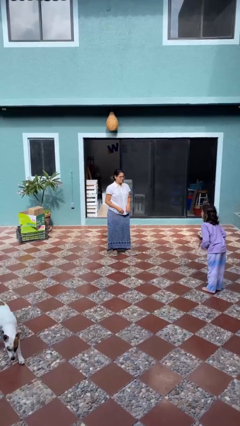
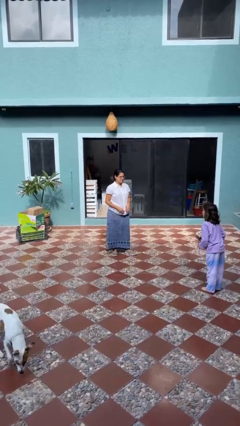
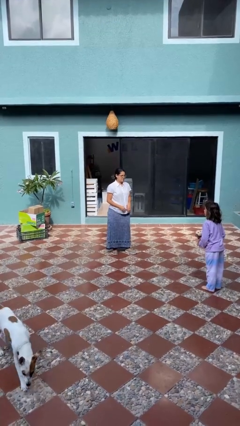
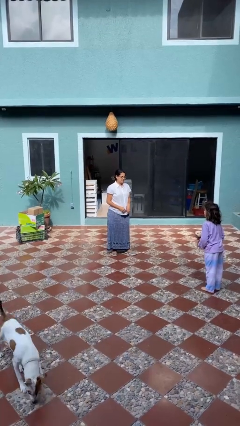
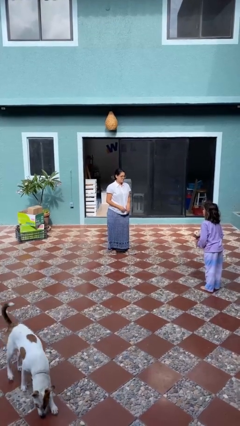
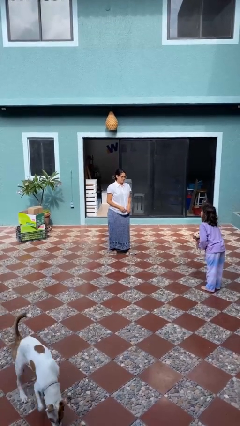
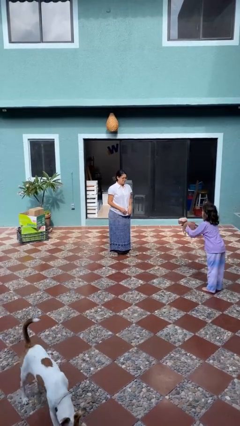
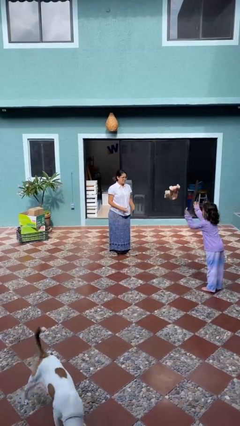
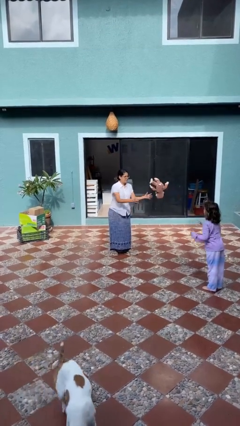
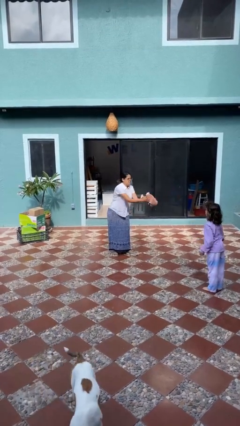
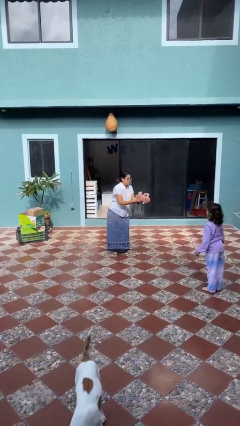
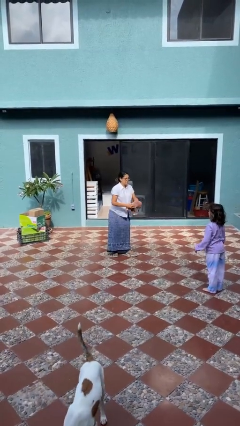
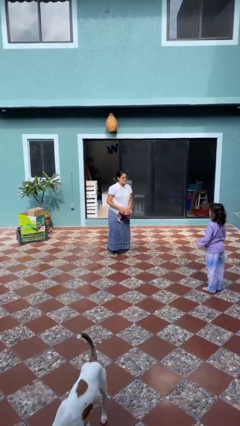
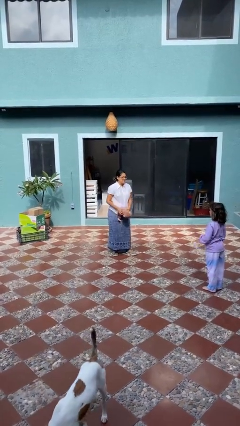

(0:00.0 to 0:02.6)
person catches object from person

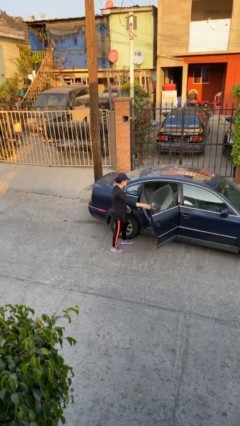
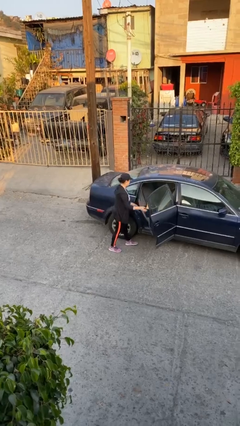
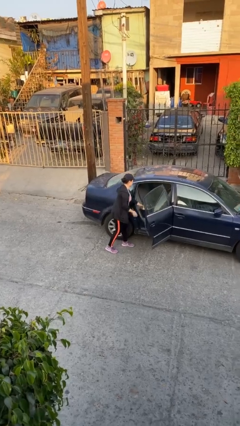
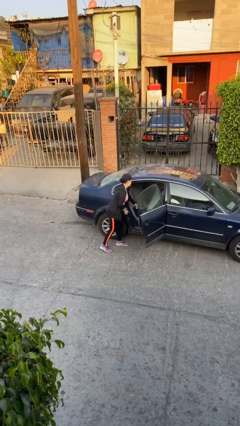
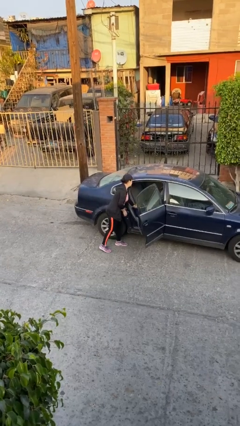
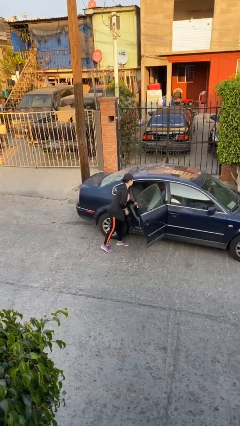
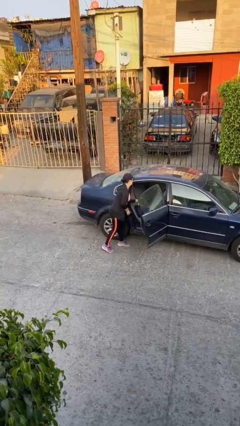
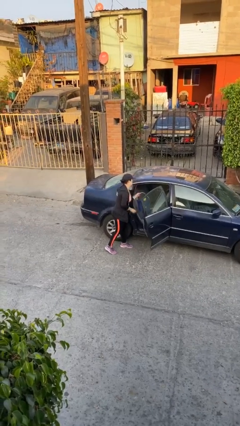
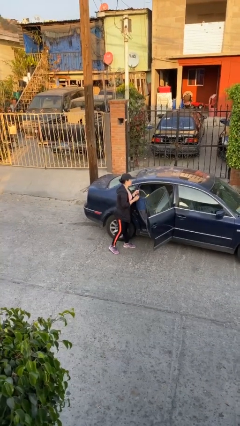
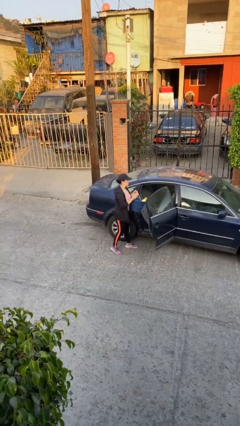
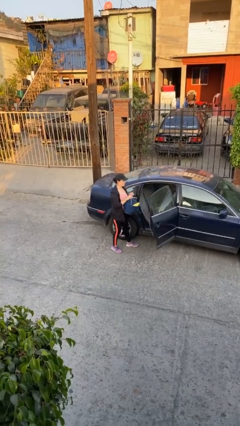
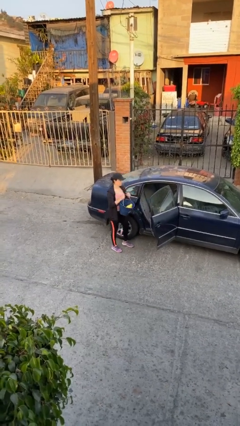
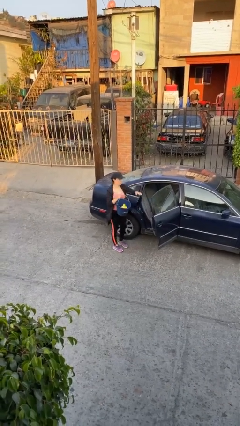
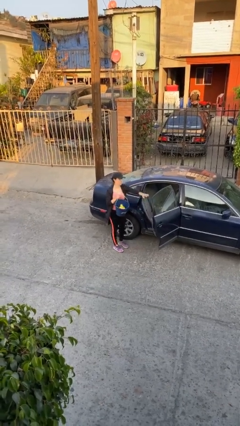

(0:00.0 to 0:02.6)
person unloads car

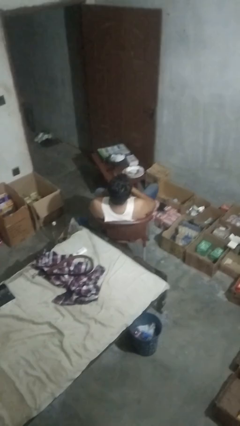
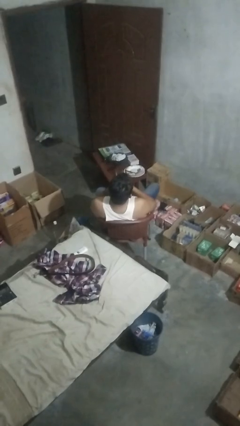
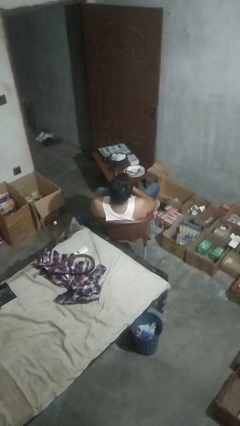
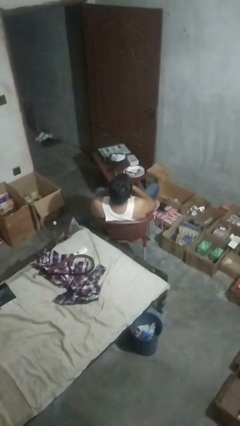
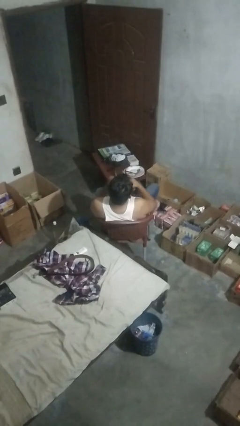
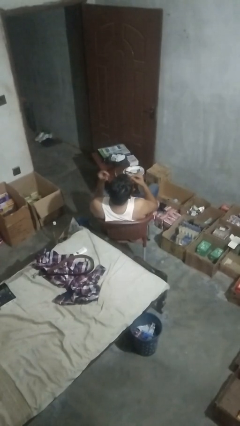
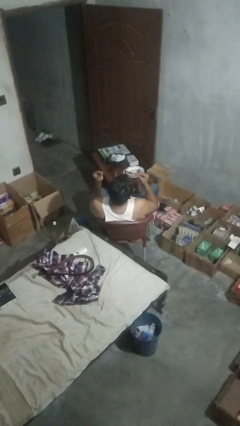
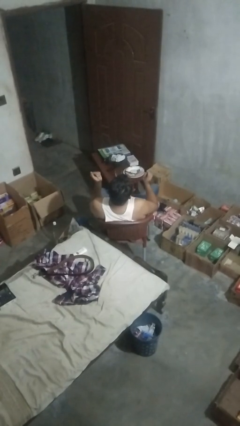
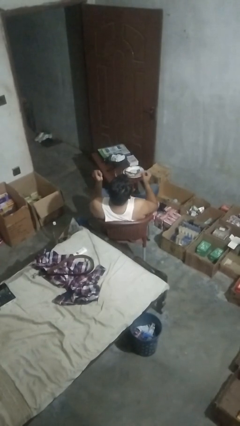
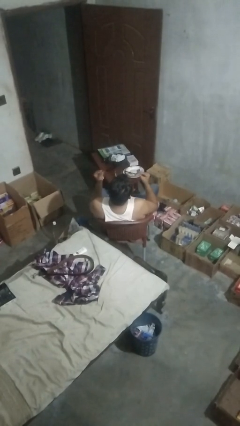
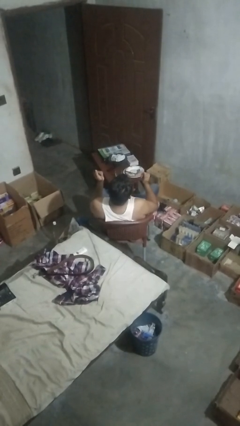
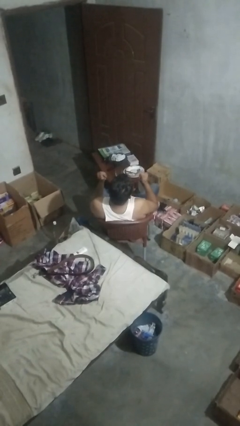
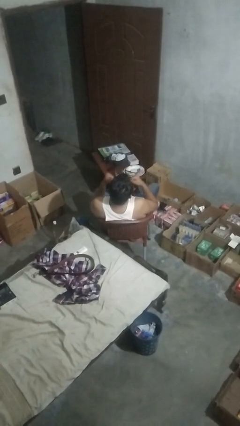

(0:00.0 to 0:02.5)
person snaps fingers

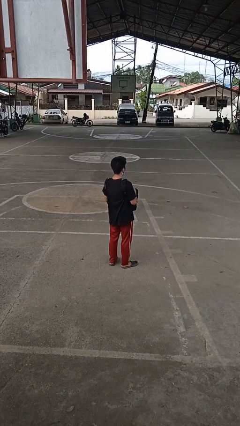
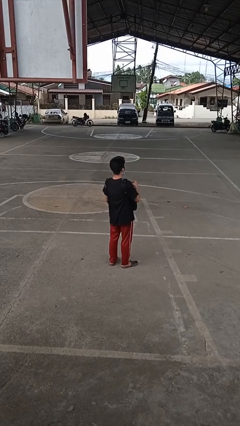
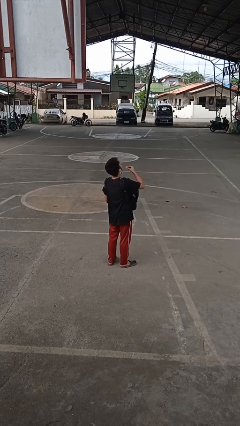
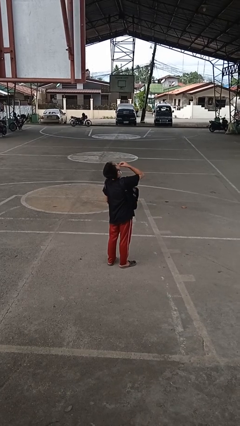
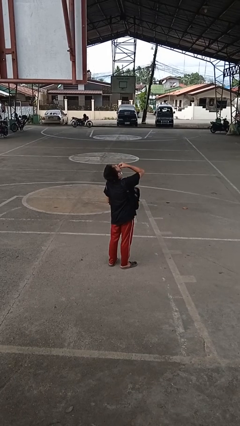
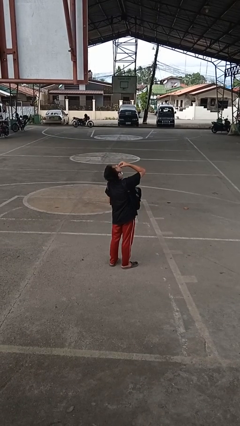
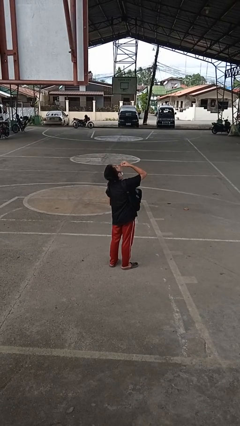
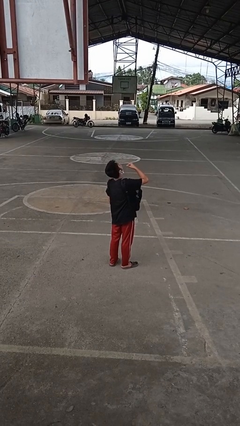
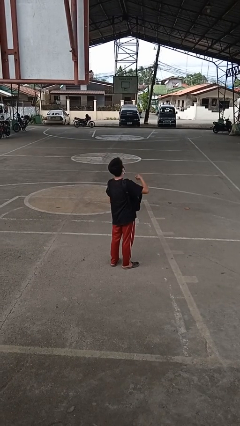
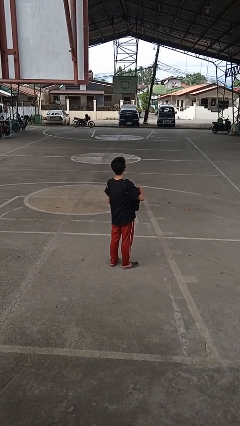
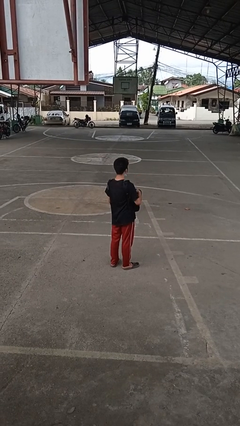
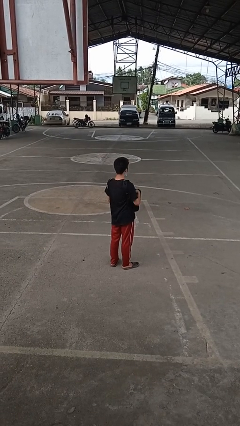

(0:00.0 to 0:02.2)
person eats snack from bag

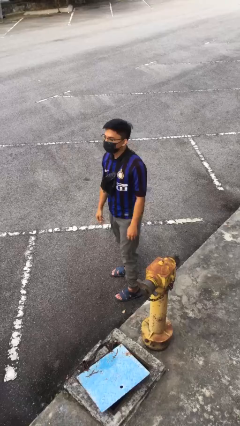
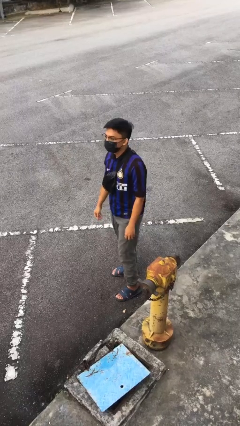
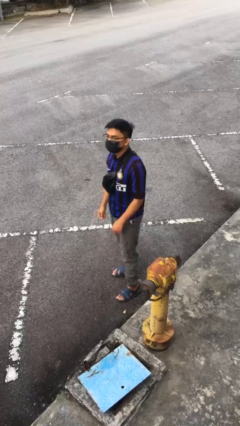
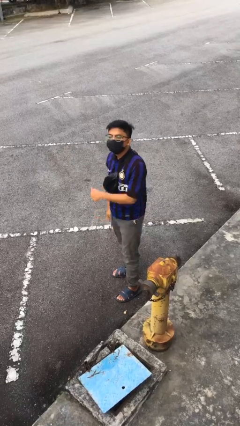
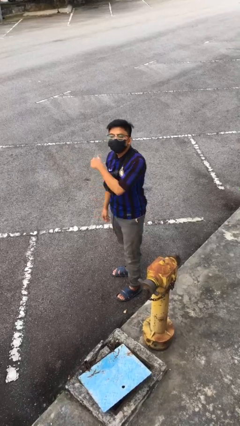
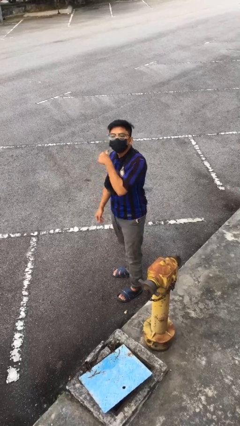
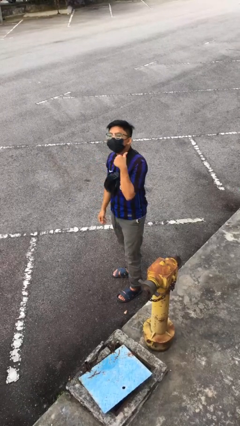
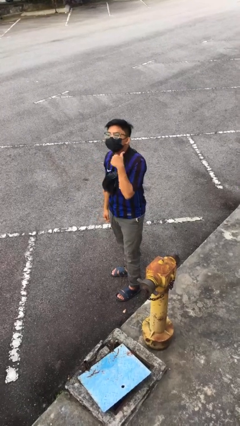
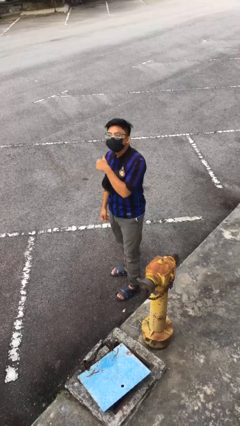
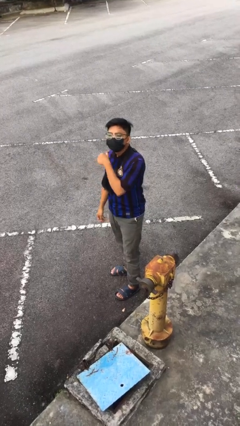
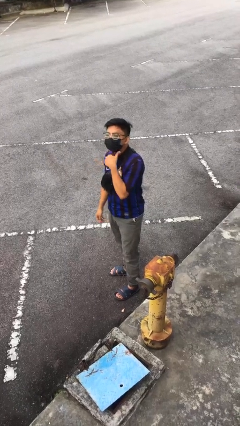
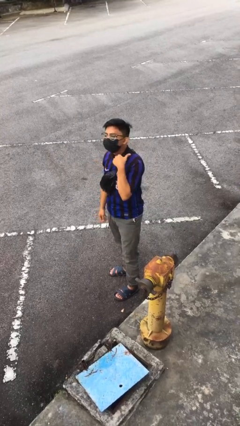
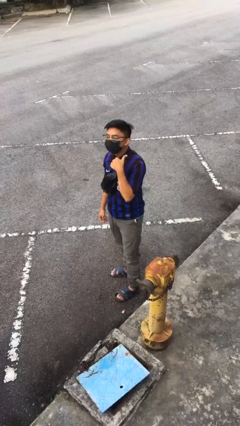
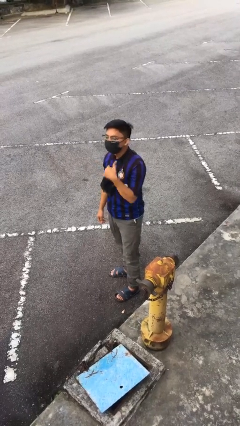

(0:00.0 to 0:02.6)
person gestures cut

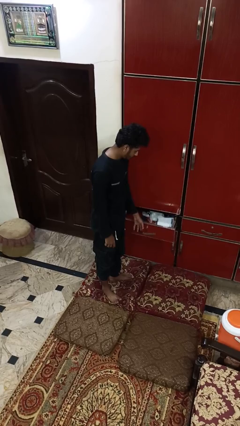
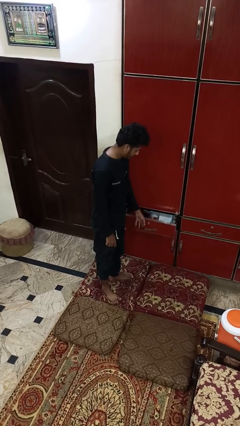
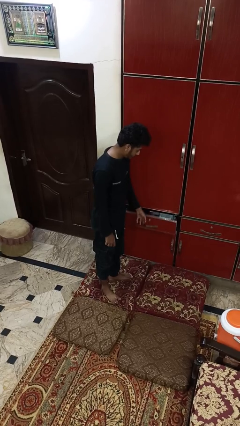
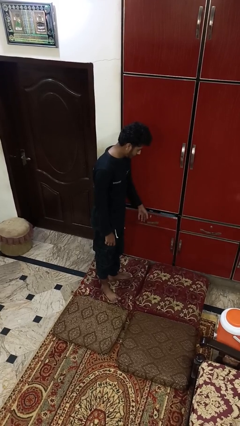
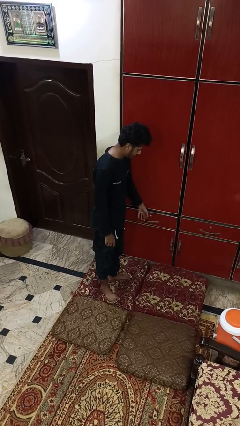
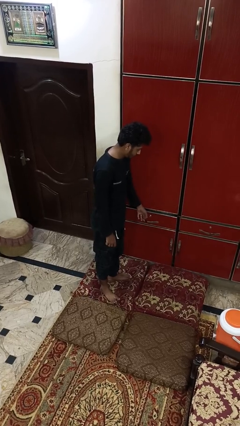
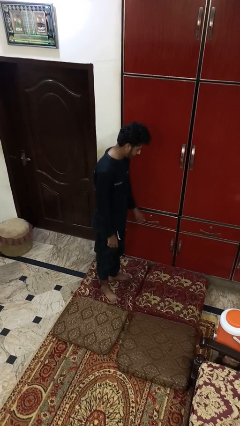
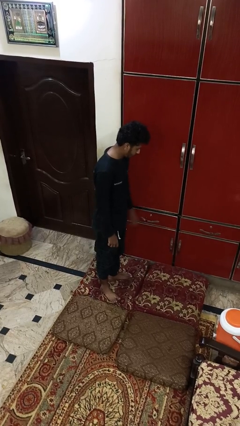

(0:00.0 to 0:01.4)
person closes dresser drawer

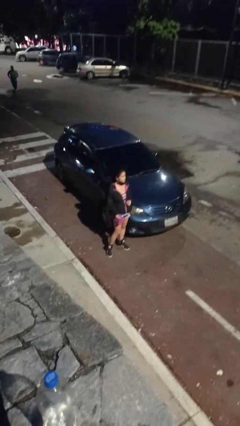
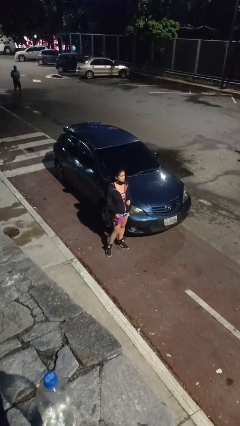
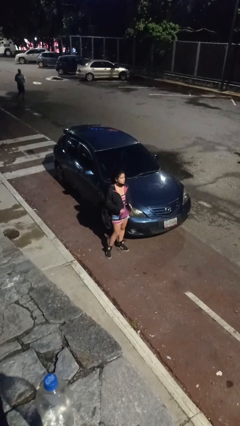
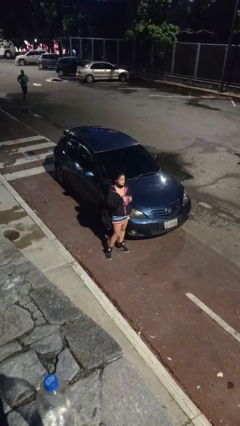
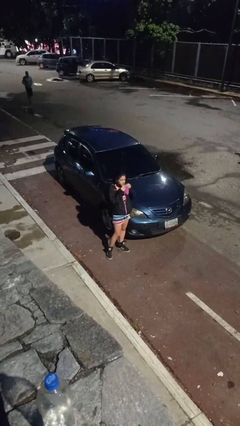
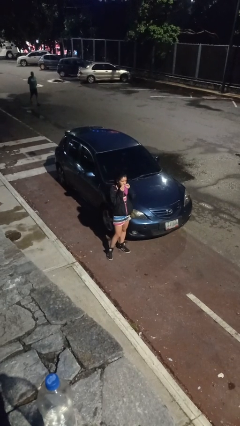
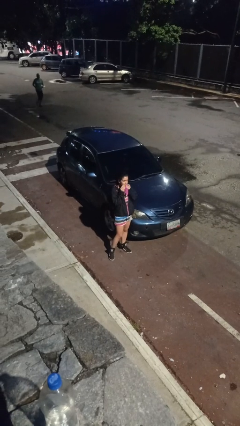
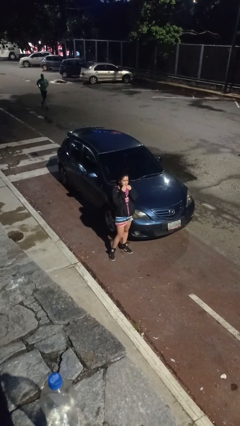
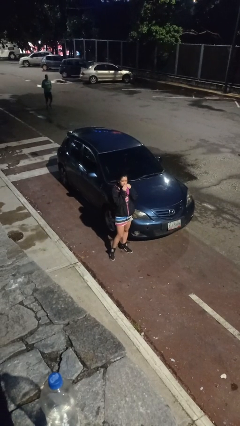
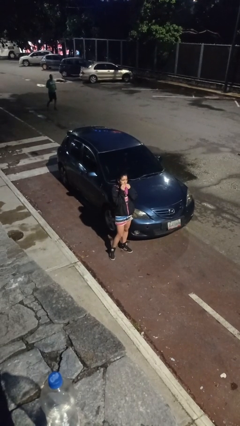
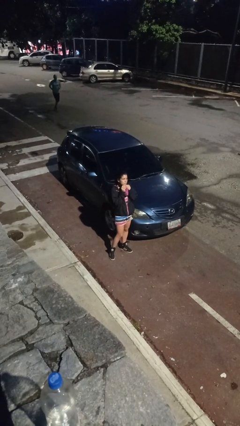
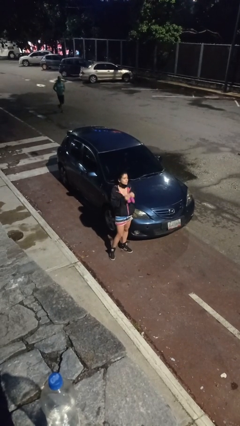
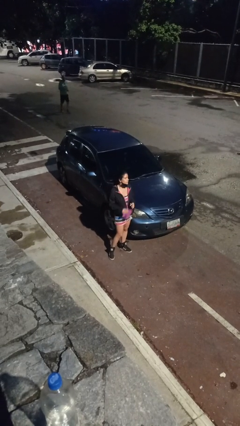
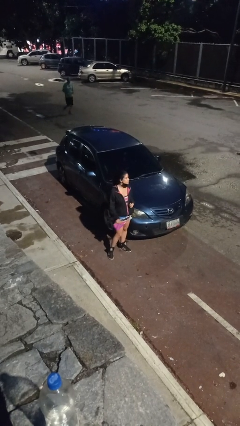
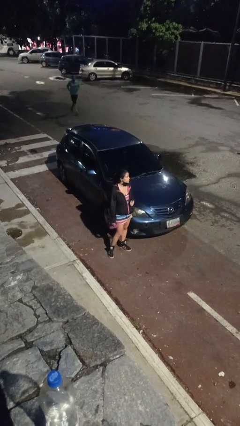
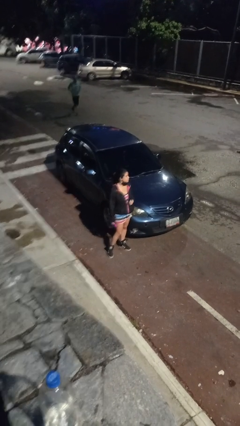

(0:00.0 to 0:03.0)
person wipes mouth with napkin
